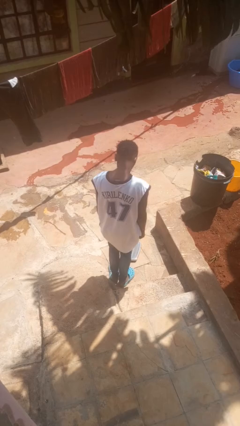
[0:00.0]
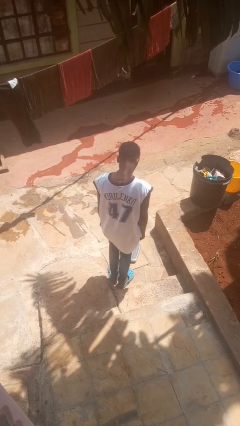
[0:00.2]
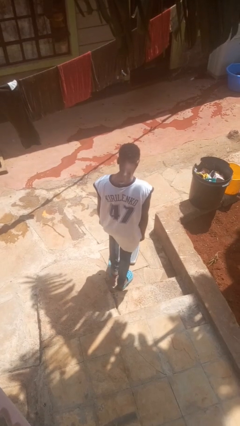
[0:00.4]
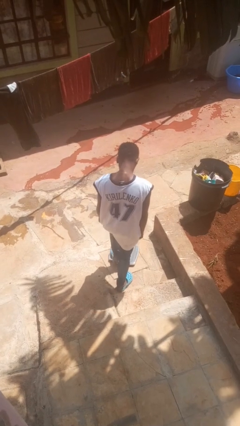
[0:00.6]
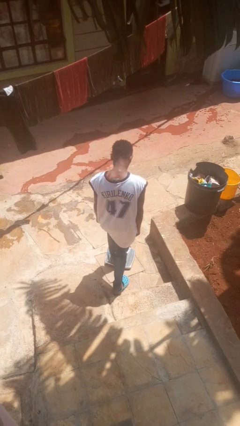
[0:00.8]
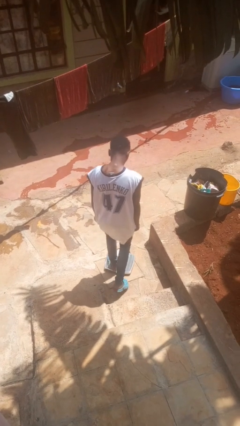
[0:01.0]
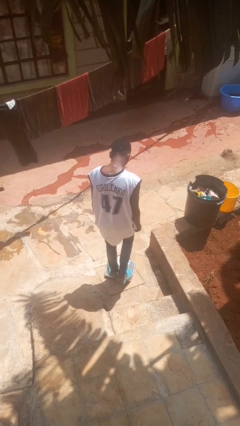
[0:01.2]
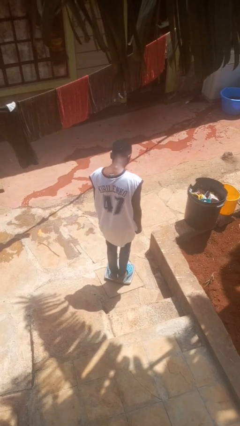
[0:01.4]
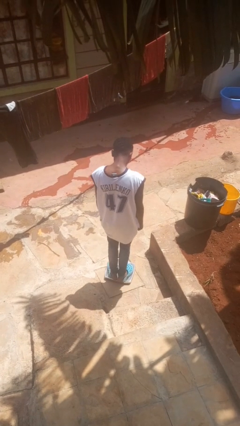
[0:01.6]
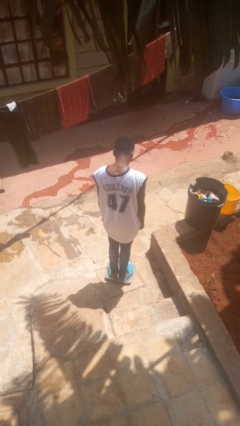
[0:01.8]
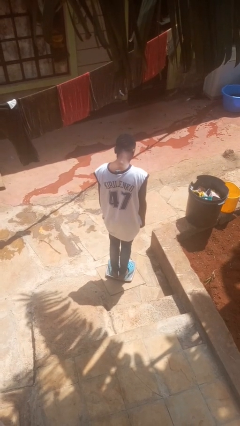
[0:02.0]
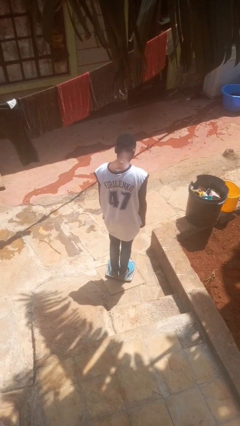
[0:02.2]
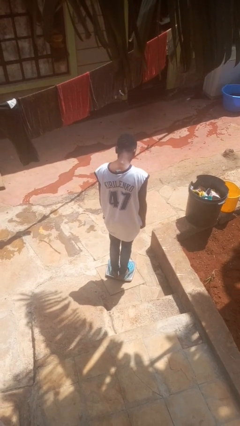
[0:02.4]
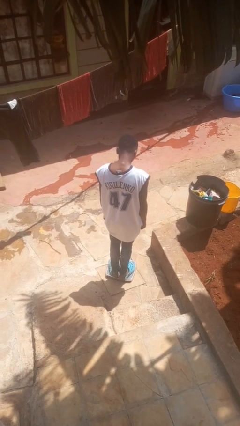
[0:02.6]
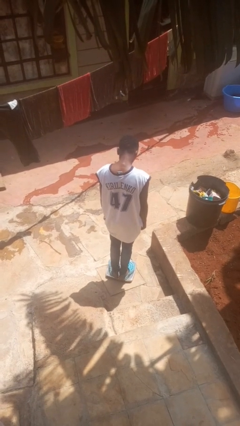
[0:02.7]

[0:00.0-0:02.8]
person uses bodyweight scale

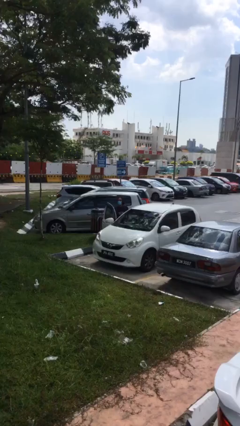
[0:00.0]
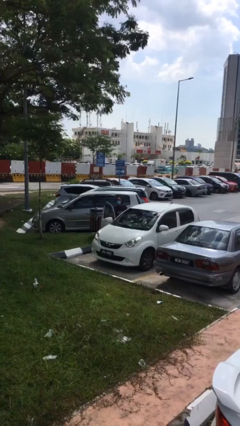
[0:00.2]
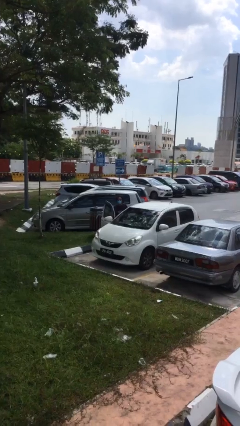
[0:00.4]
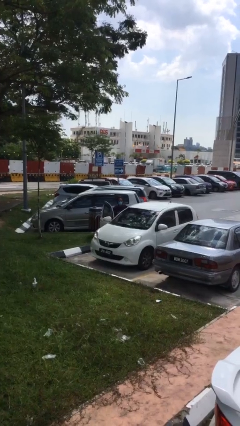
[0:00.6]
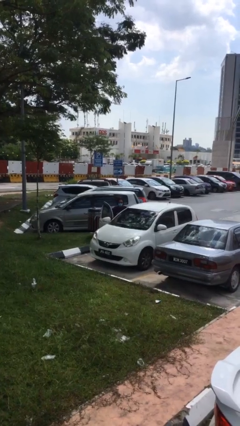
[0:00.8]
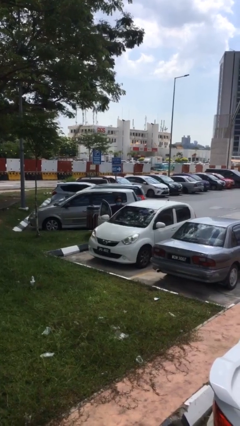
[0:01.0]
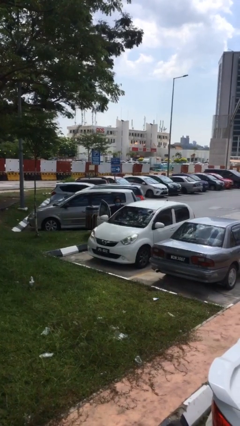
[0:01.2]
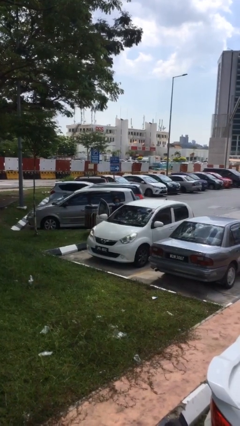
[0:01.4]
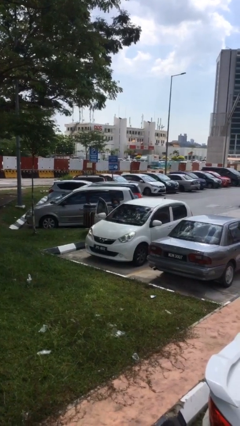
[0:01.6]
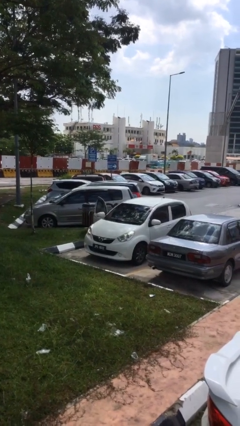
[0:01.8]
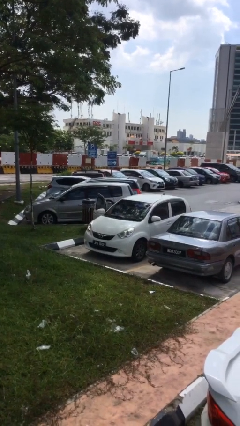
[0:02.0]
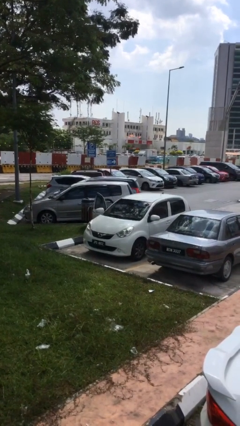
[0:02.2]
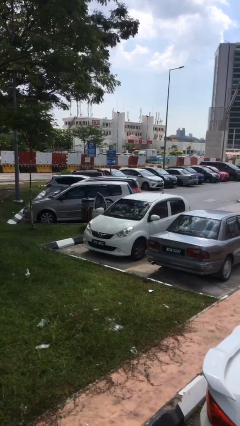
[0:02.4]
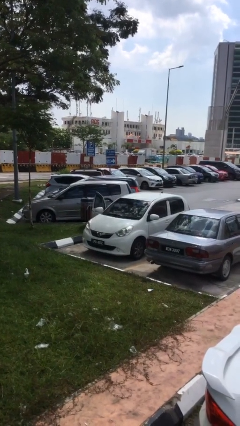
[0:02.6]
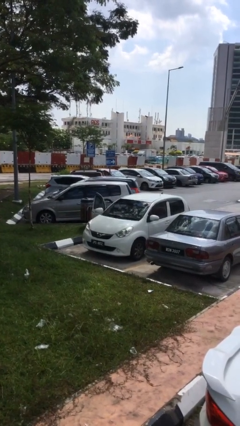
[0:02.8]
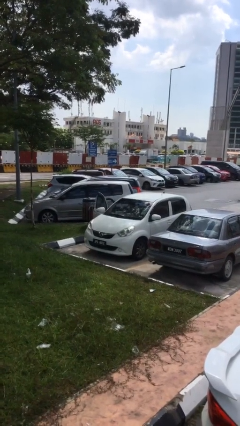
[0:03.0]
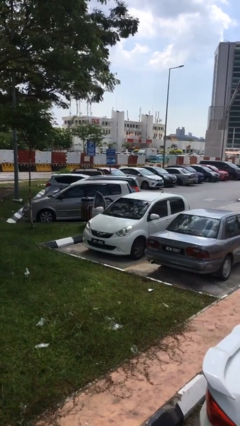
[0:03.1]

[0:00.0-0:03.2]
person enters car

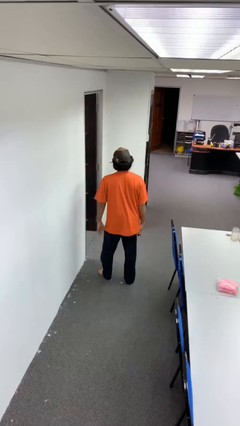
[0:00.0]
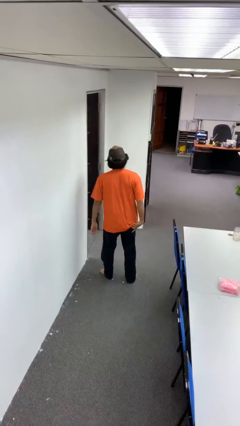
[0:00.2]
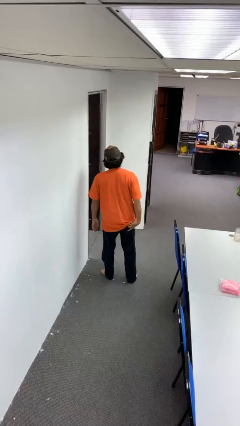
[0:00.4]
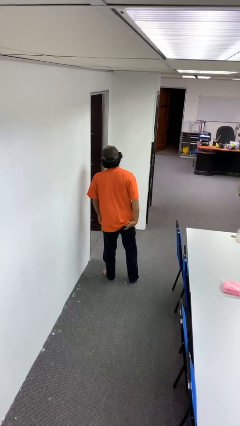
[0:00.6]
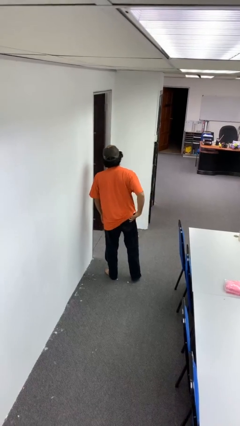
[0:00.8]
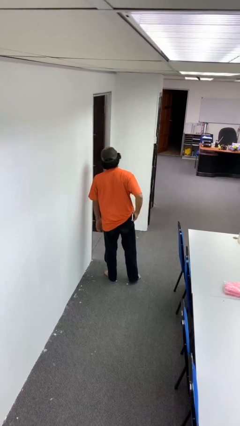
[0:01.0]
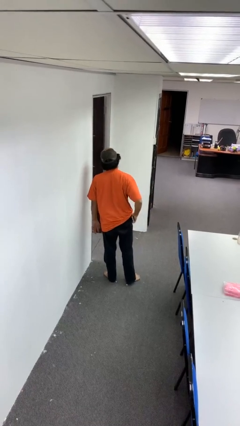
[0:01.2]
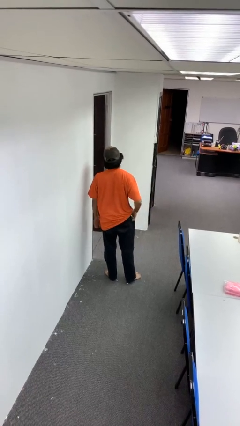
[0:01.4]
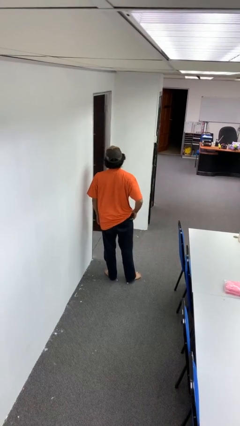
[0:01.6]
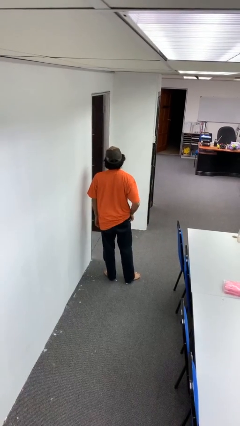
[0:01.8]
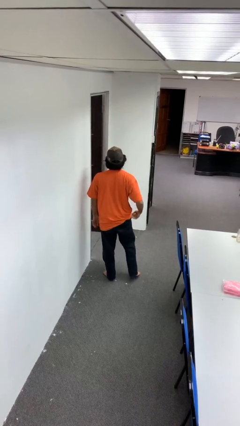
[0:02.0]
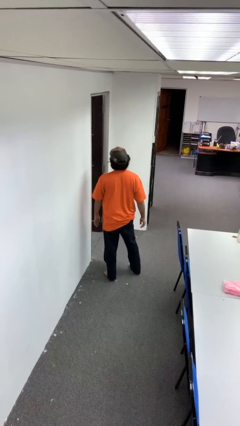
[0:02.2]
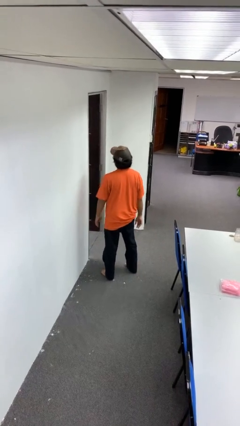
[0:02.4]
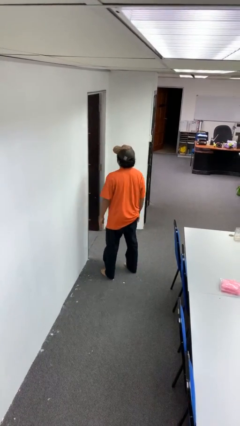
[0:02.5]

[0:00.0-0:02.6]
person puts phone into pocket

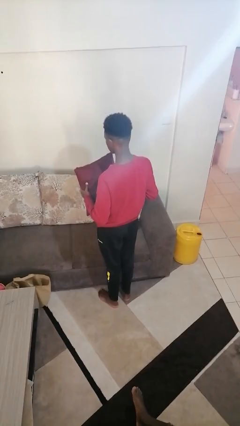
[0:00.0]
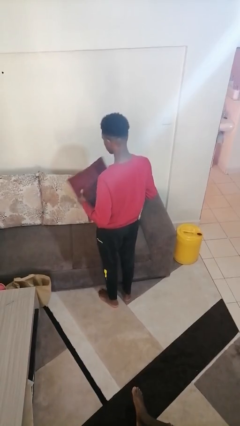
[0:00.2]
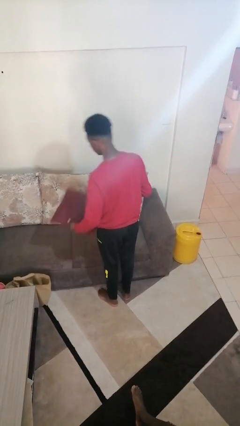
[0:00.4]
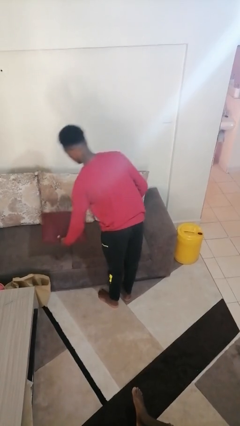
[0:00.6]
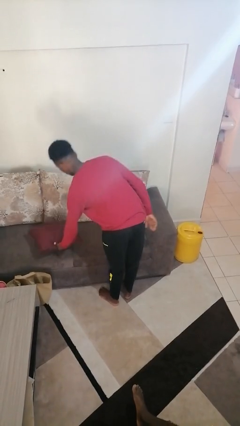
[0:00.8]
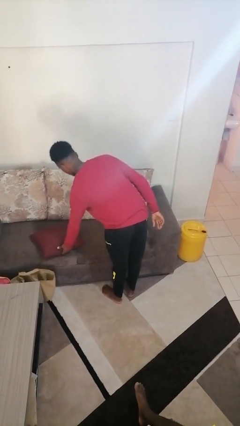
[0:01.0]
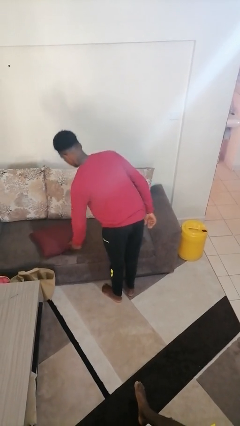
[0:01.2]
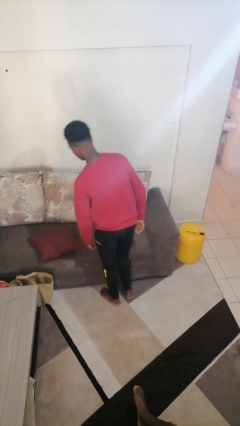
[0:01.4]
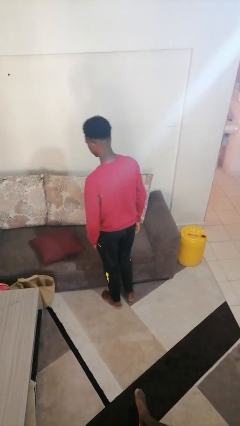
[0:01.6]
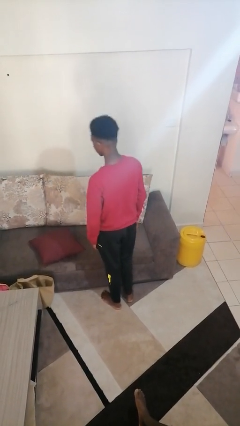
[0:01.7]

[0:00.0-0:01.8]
person puts down object on couch

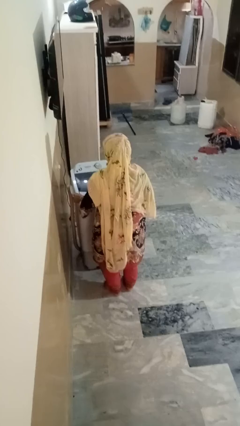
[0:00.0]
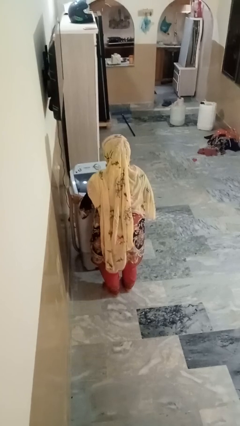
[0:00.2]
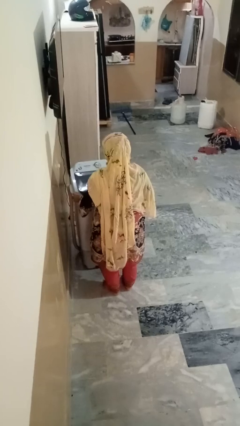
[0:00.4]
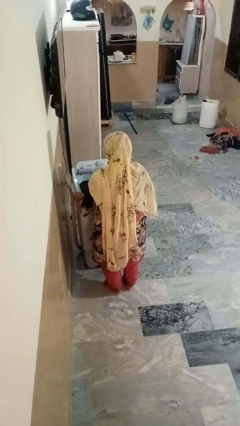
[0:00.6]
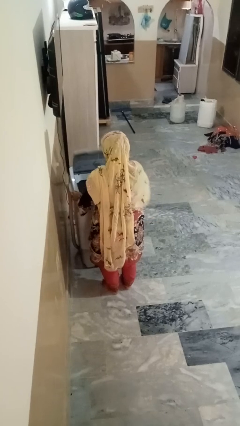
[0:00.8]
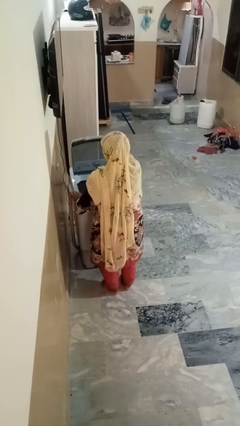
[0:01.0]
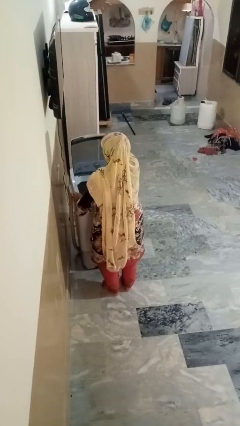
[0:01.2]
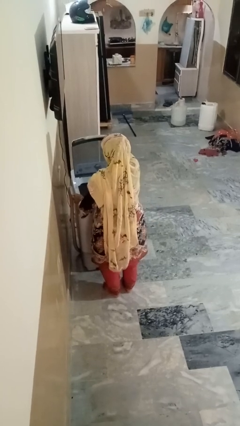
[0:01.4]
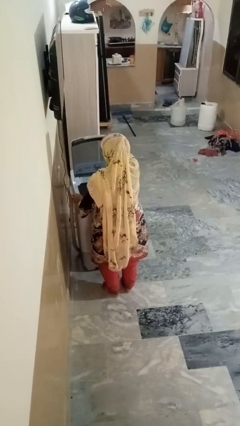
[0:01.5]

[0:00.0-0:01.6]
person opens clothes washer

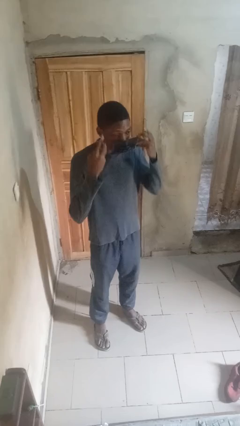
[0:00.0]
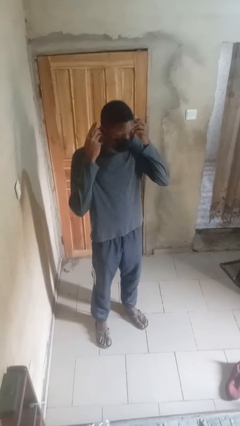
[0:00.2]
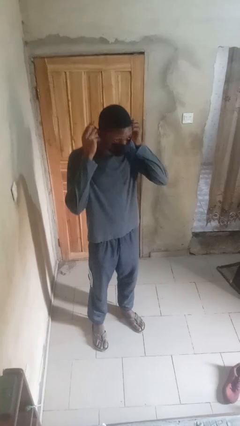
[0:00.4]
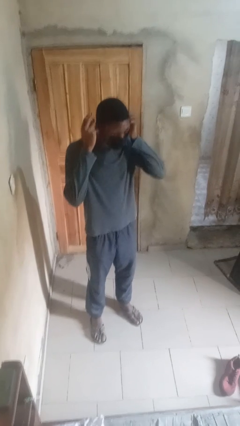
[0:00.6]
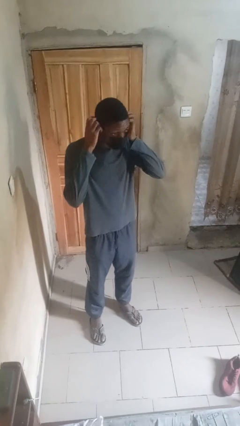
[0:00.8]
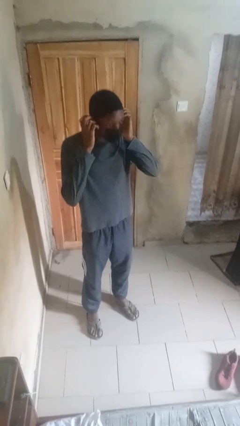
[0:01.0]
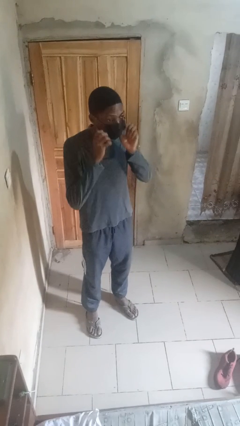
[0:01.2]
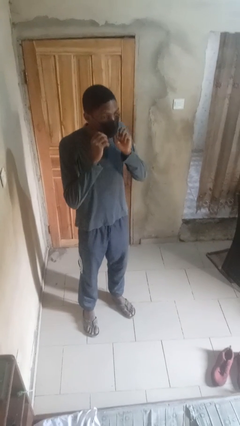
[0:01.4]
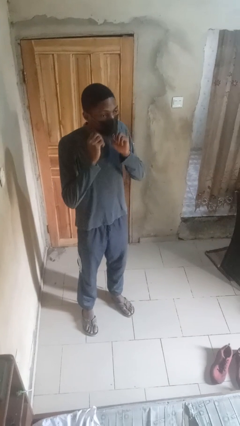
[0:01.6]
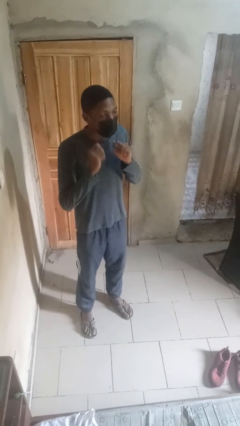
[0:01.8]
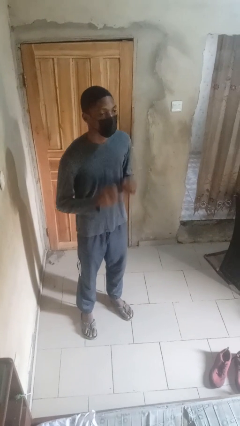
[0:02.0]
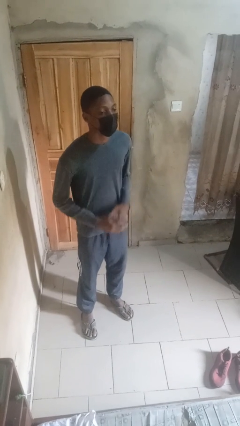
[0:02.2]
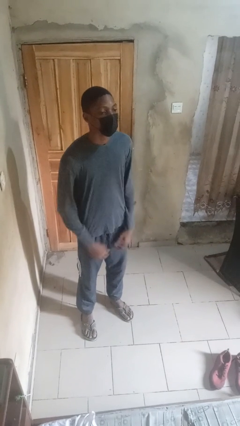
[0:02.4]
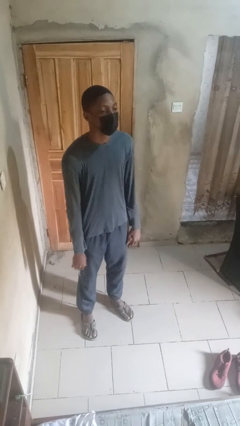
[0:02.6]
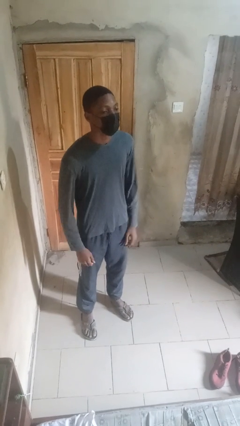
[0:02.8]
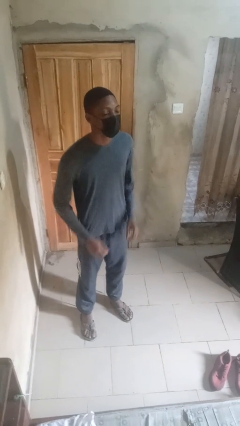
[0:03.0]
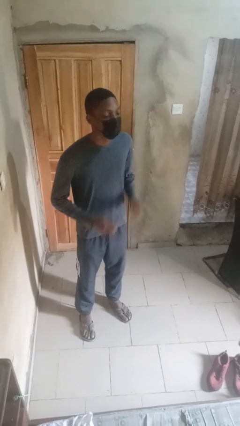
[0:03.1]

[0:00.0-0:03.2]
person puts on facemask

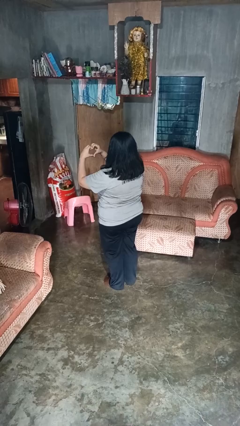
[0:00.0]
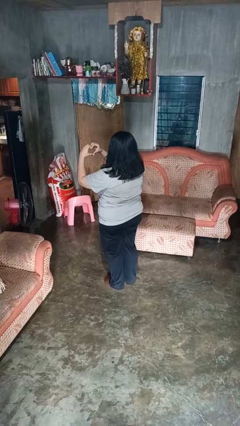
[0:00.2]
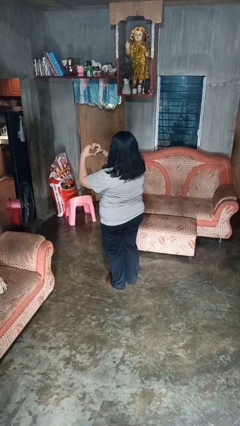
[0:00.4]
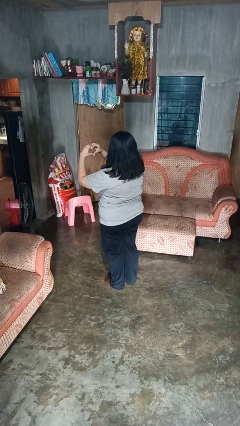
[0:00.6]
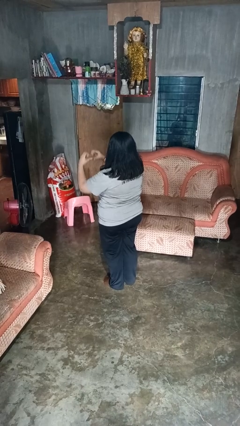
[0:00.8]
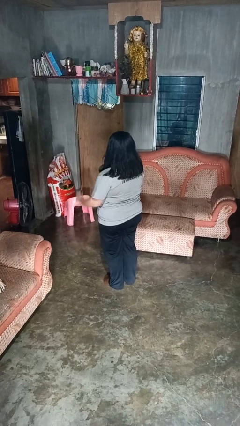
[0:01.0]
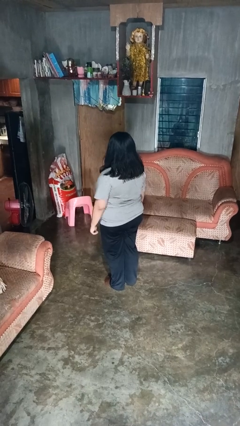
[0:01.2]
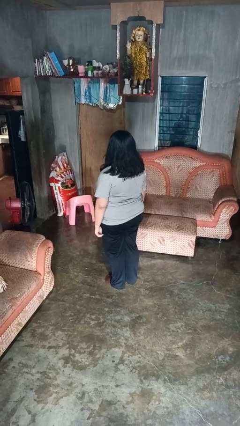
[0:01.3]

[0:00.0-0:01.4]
person gestures heart

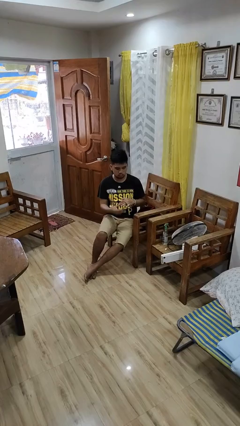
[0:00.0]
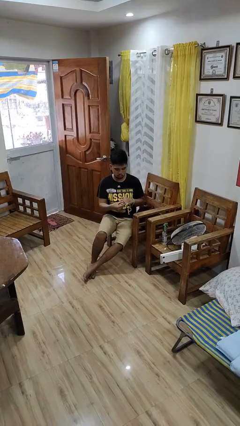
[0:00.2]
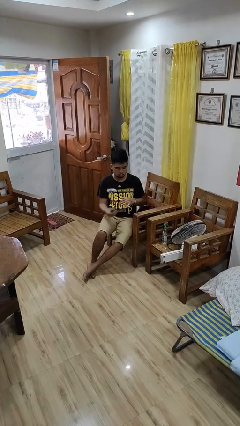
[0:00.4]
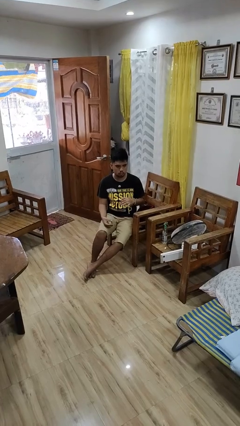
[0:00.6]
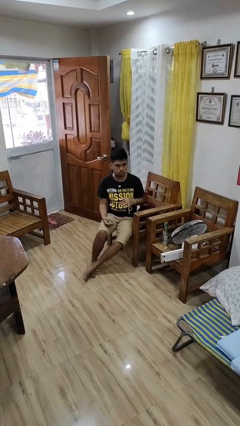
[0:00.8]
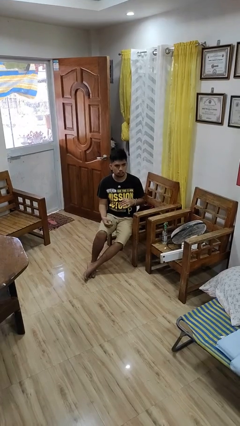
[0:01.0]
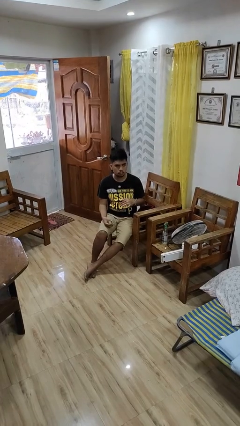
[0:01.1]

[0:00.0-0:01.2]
person takes off ring
